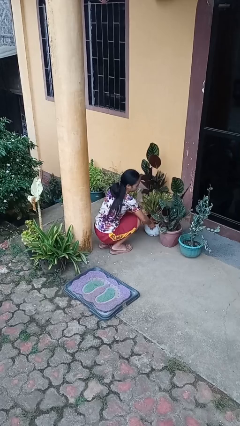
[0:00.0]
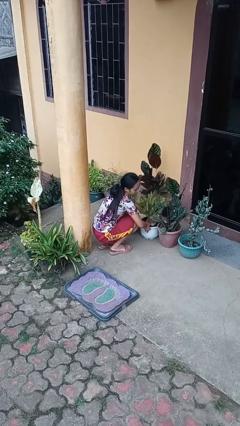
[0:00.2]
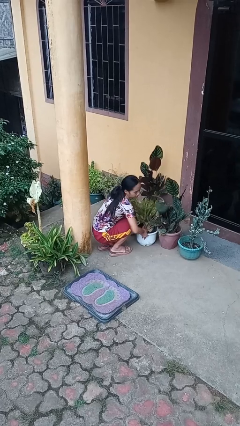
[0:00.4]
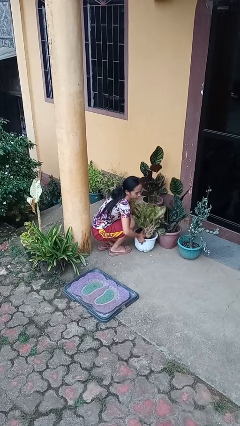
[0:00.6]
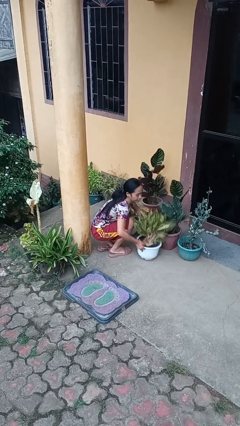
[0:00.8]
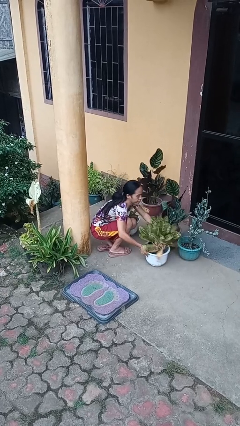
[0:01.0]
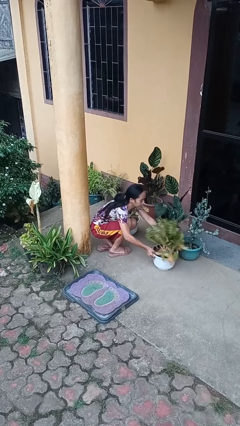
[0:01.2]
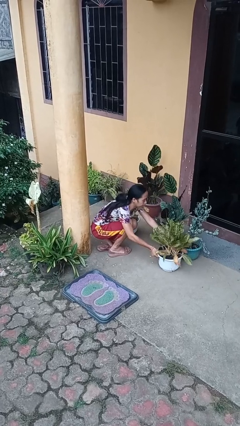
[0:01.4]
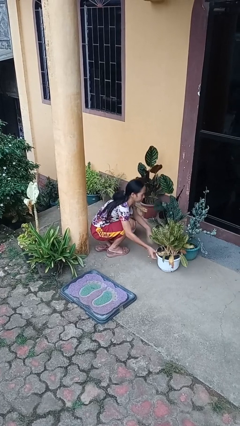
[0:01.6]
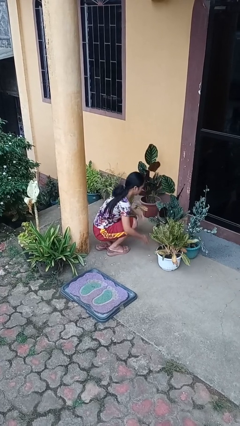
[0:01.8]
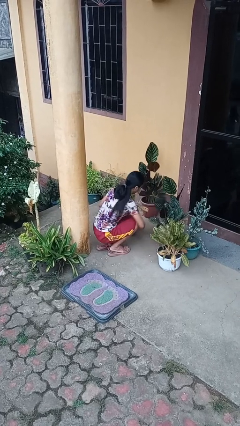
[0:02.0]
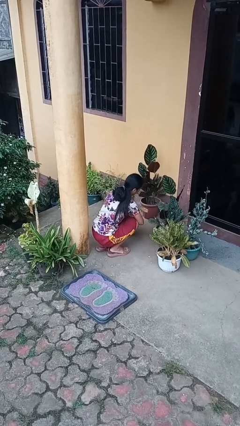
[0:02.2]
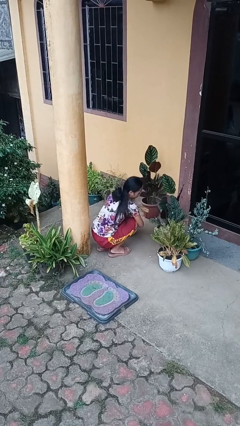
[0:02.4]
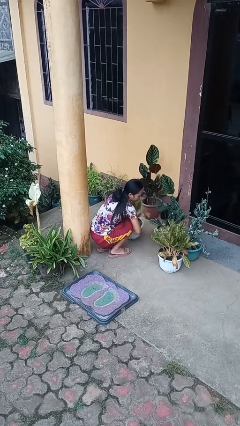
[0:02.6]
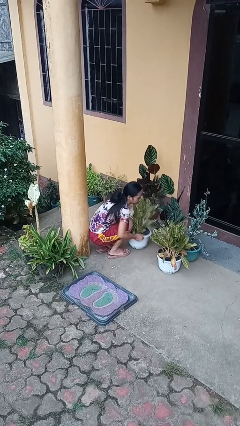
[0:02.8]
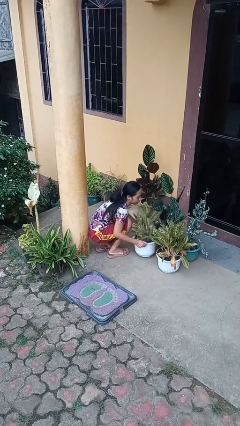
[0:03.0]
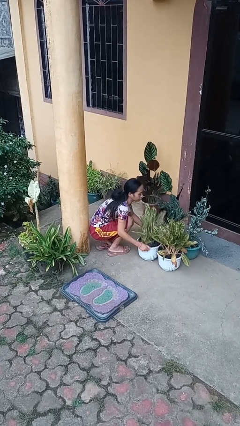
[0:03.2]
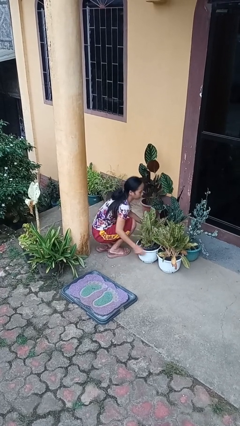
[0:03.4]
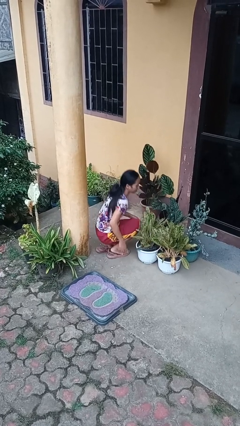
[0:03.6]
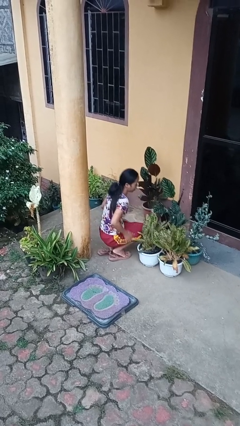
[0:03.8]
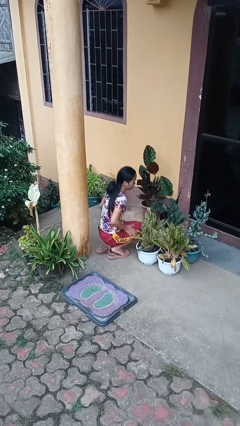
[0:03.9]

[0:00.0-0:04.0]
person arranges flowers in vase

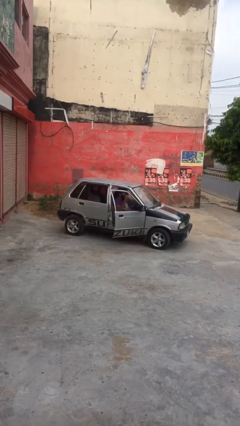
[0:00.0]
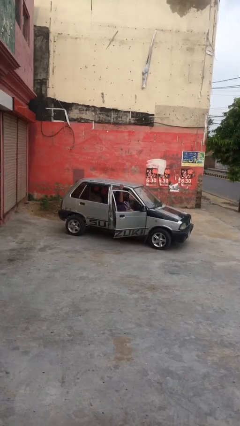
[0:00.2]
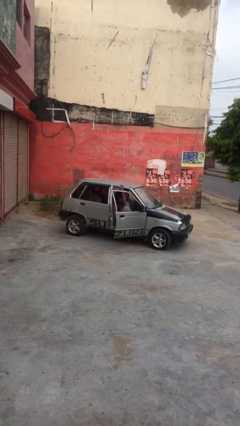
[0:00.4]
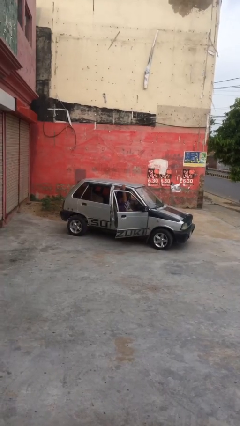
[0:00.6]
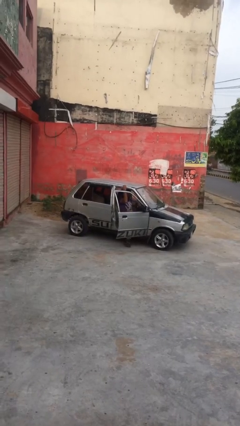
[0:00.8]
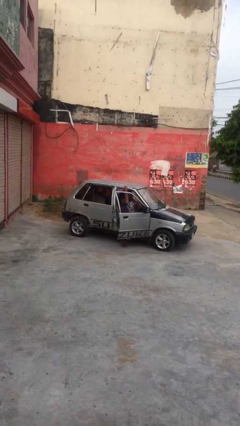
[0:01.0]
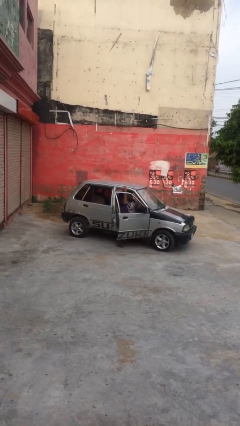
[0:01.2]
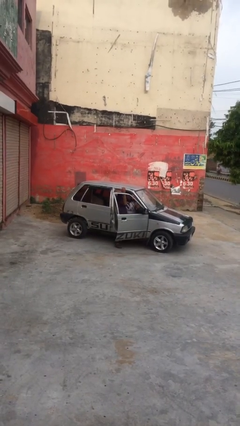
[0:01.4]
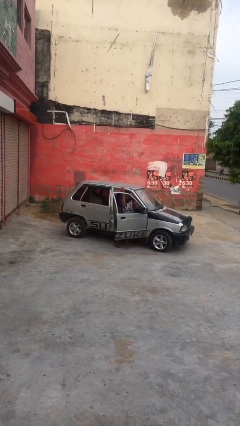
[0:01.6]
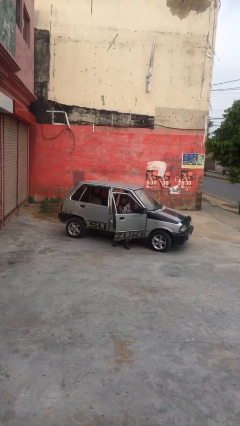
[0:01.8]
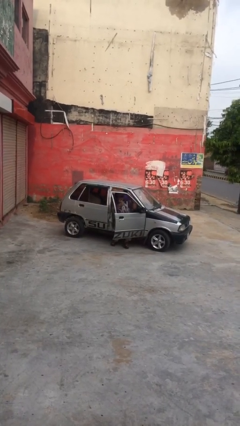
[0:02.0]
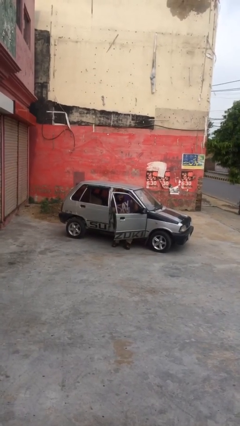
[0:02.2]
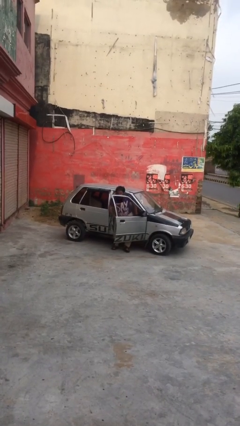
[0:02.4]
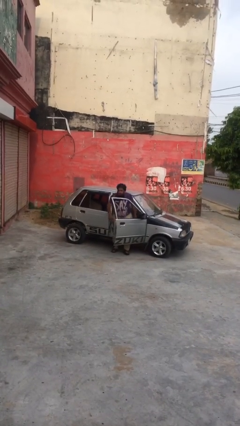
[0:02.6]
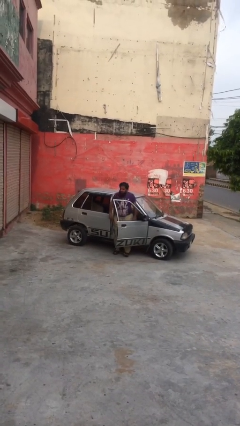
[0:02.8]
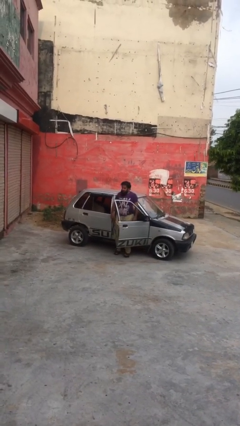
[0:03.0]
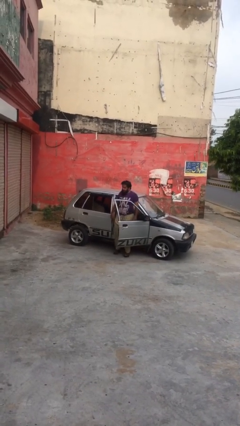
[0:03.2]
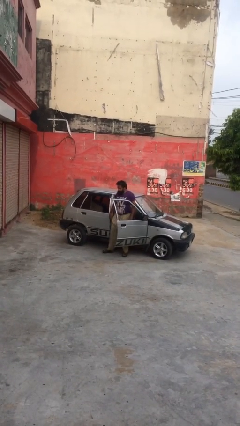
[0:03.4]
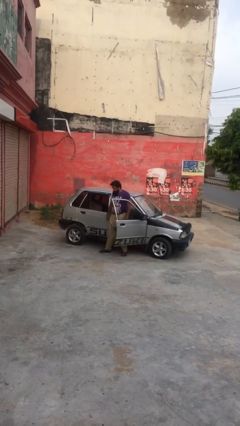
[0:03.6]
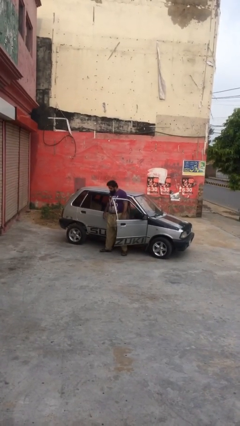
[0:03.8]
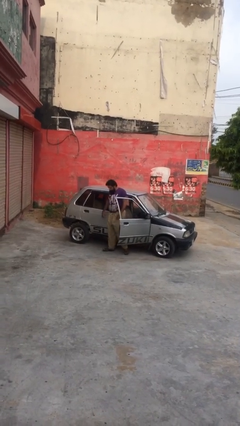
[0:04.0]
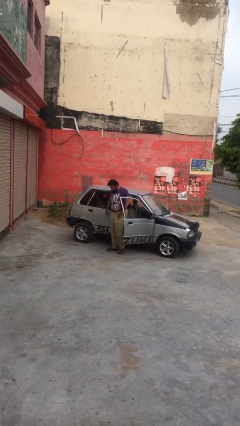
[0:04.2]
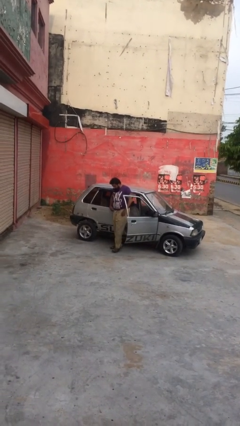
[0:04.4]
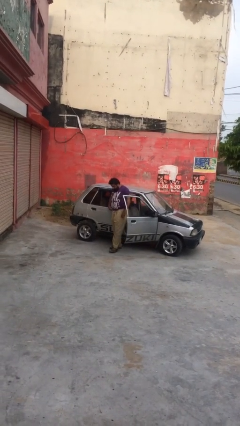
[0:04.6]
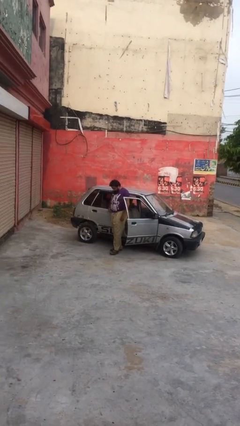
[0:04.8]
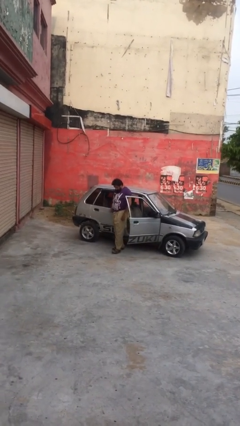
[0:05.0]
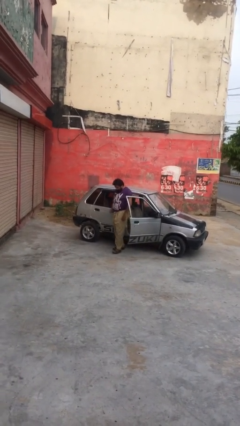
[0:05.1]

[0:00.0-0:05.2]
person exits car

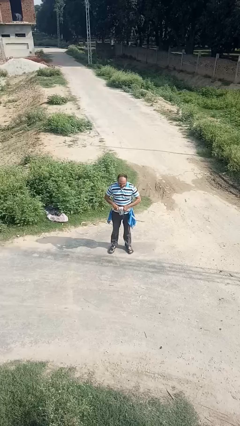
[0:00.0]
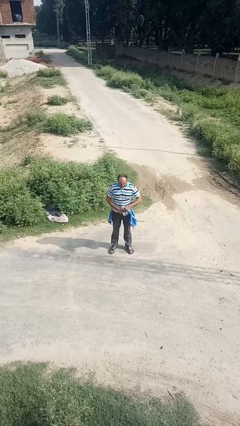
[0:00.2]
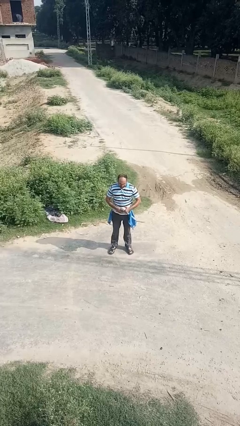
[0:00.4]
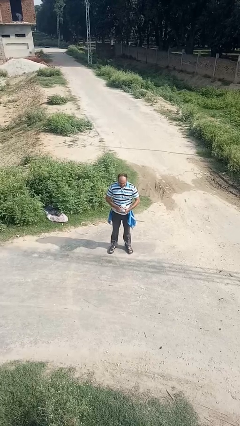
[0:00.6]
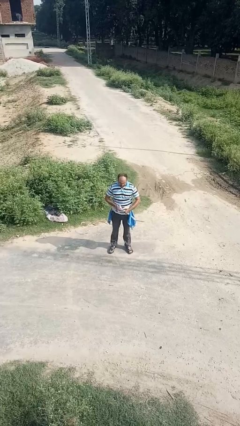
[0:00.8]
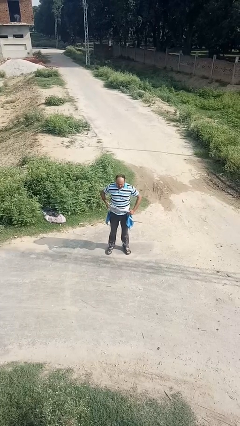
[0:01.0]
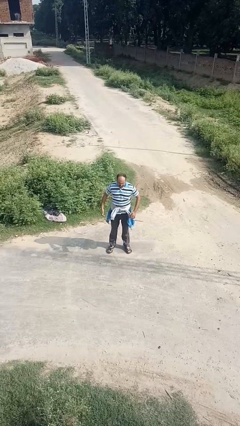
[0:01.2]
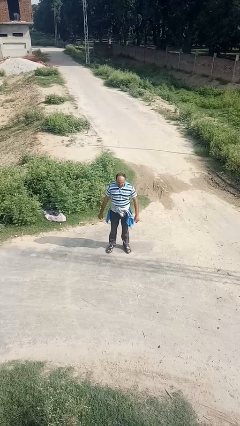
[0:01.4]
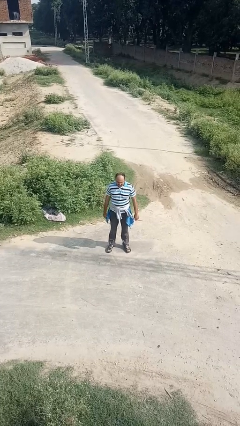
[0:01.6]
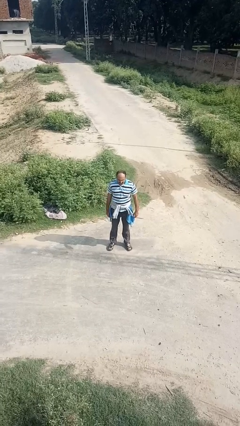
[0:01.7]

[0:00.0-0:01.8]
person ties jacket around waist

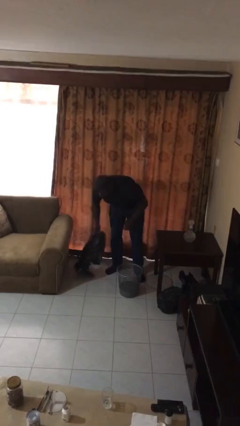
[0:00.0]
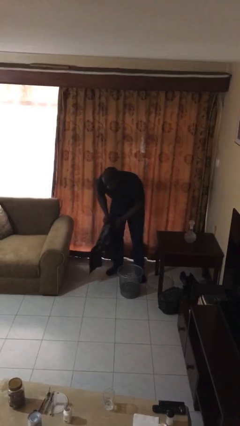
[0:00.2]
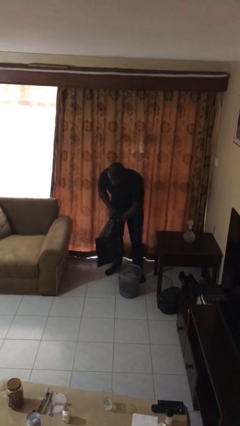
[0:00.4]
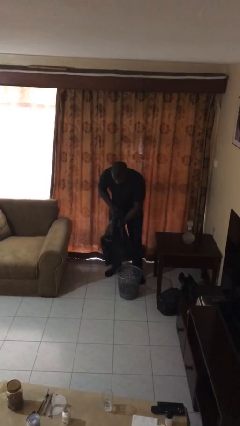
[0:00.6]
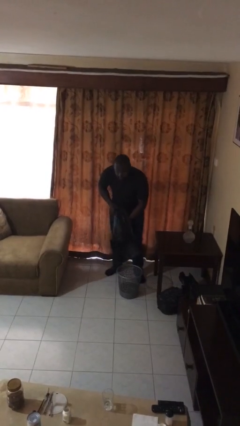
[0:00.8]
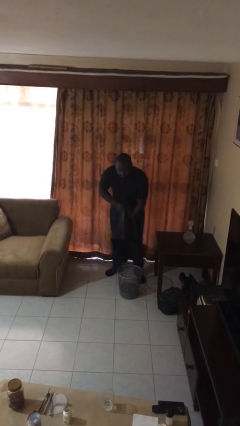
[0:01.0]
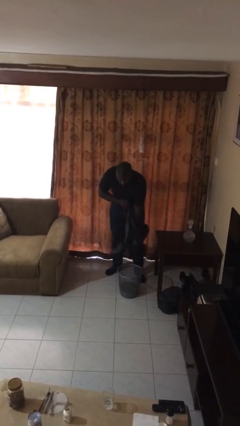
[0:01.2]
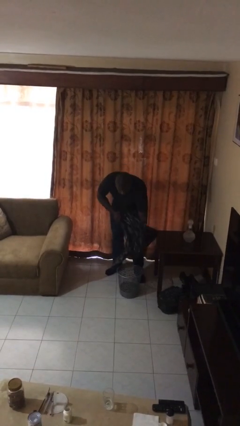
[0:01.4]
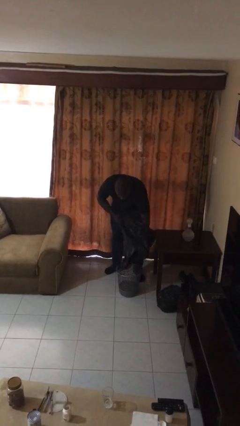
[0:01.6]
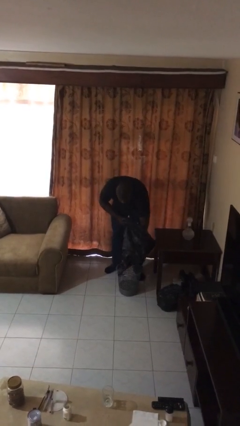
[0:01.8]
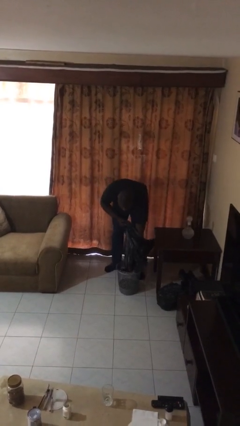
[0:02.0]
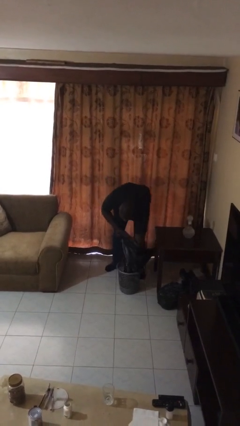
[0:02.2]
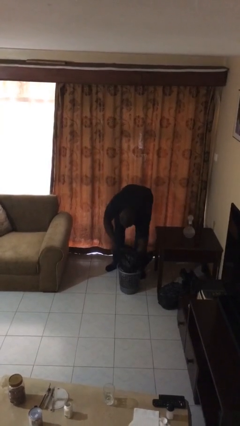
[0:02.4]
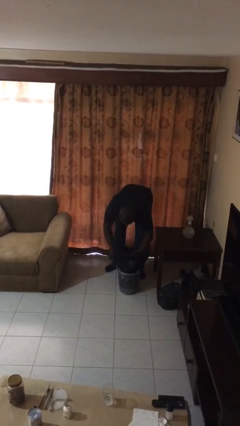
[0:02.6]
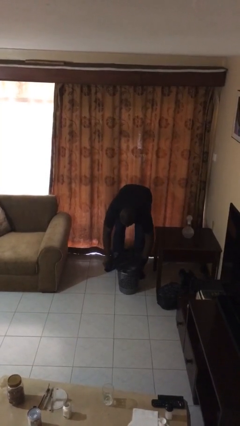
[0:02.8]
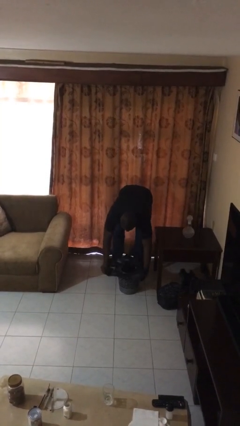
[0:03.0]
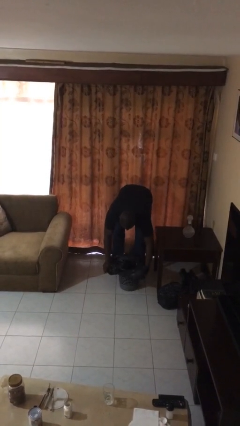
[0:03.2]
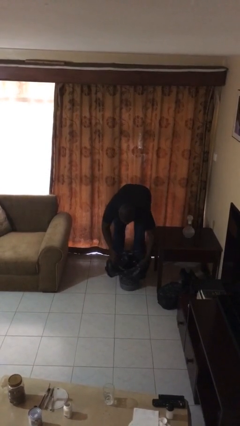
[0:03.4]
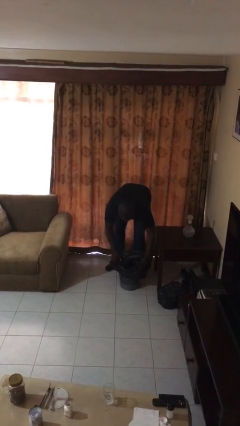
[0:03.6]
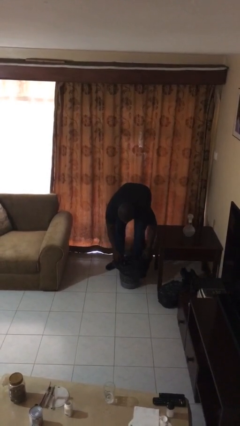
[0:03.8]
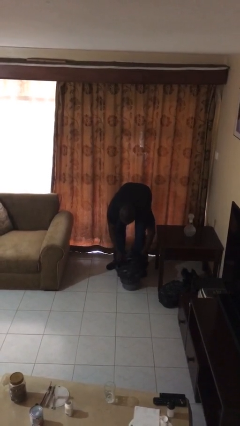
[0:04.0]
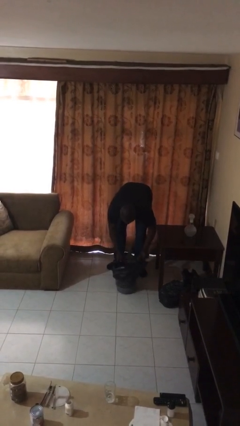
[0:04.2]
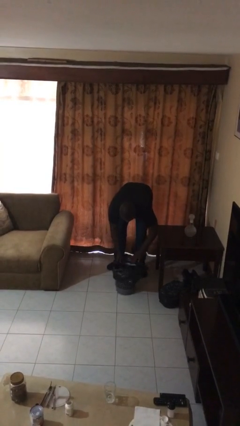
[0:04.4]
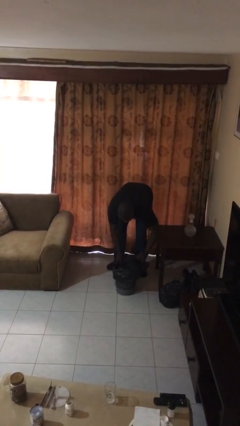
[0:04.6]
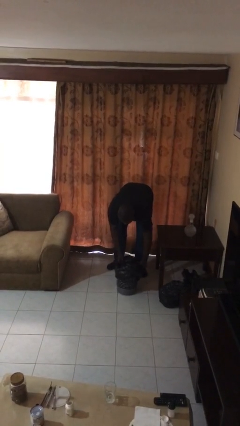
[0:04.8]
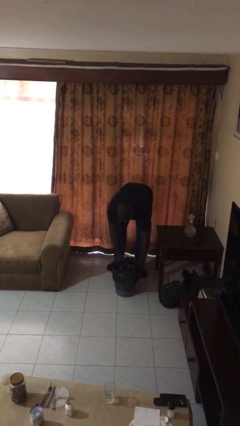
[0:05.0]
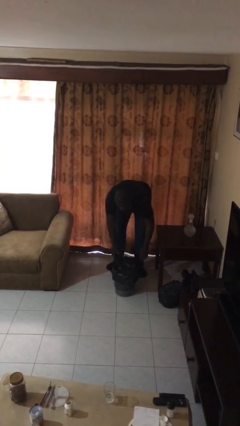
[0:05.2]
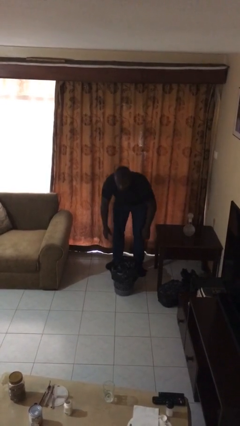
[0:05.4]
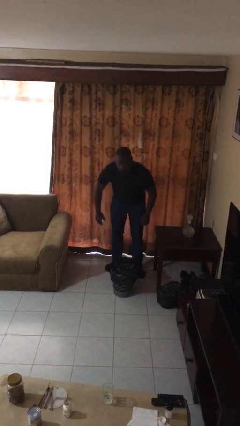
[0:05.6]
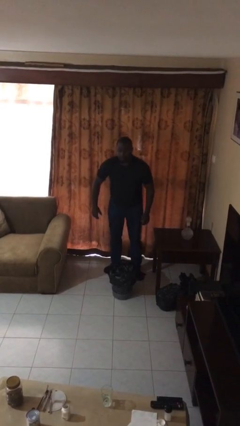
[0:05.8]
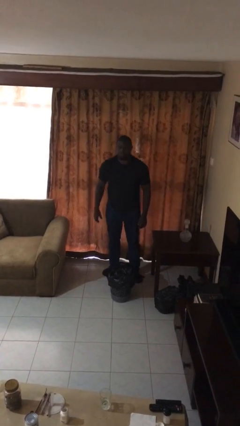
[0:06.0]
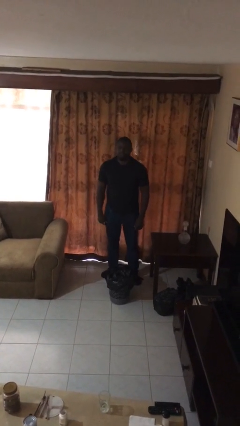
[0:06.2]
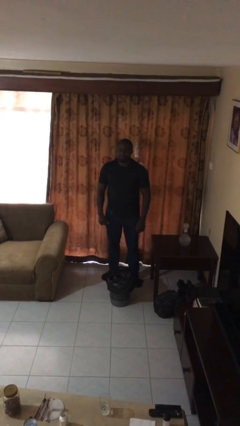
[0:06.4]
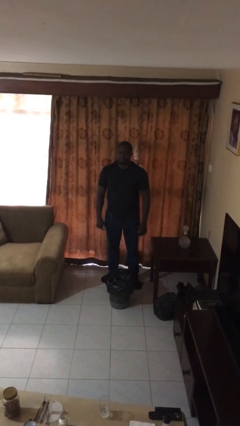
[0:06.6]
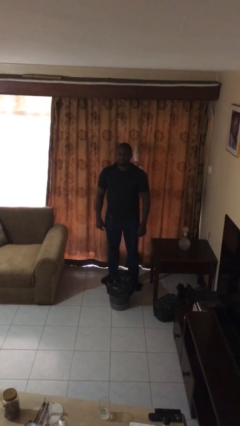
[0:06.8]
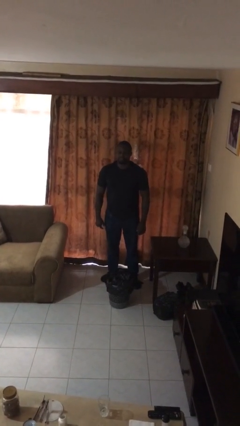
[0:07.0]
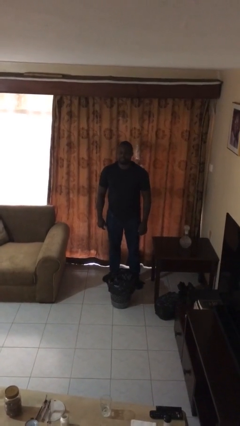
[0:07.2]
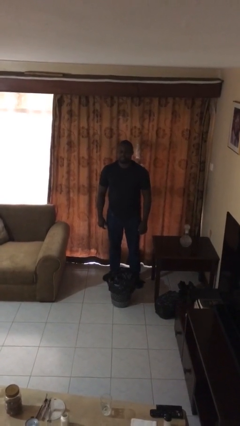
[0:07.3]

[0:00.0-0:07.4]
person inserts trashbag into trashcan
